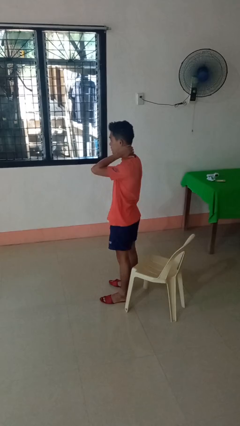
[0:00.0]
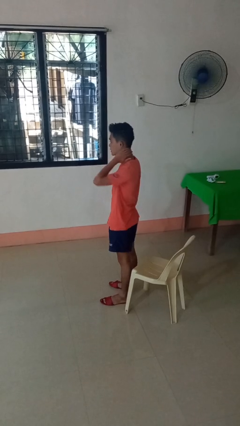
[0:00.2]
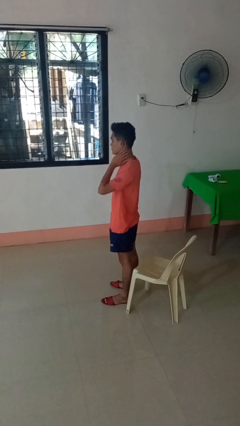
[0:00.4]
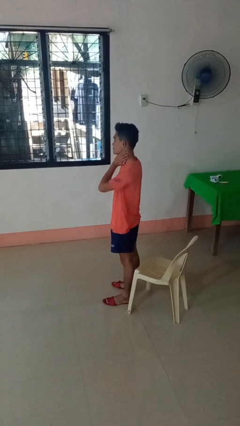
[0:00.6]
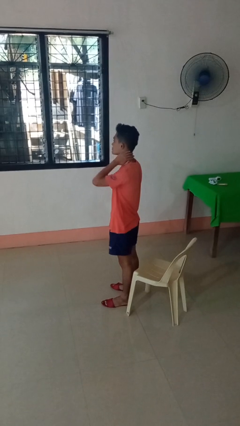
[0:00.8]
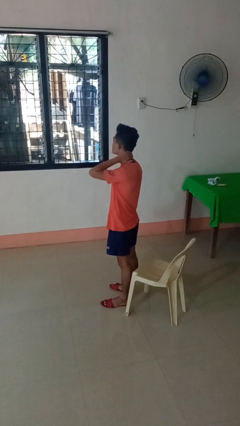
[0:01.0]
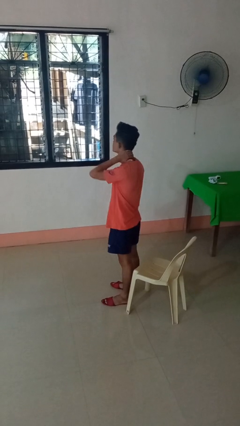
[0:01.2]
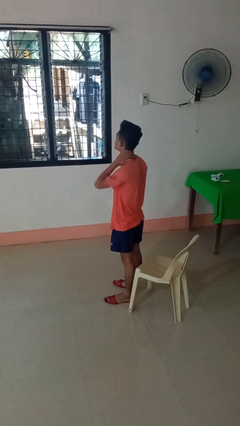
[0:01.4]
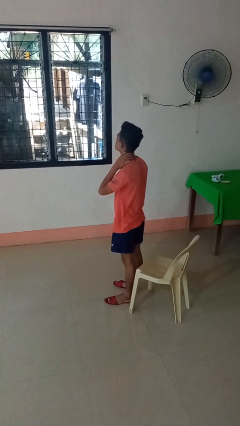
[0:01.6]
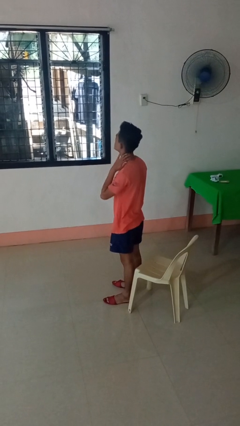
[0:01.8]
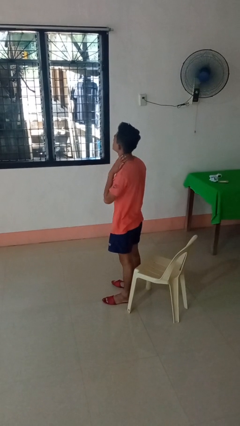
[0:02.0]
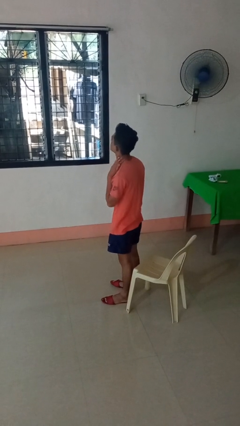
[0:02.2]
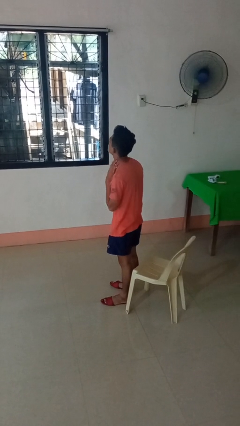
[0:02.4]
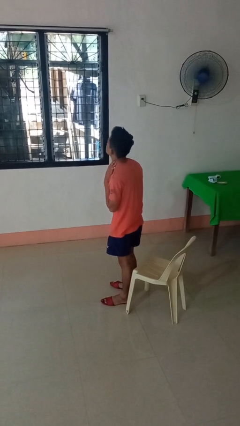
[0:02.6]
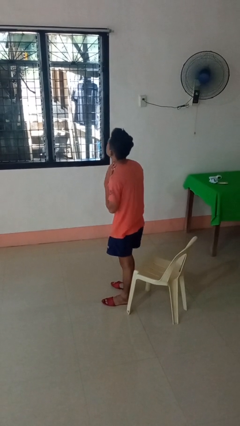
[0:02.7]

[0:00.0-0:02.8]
person rubs neck

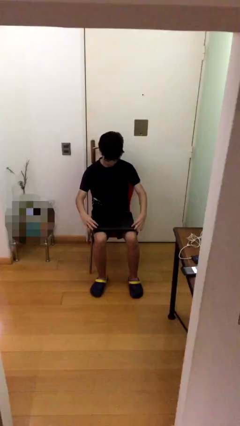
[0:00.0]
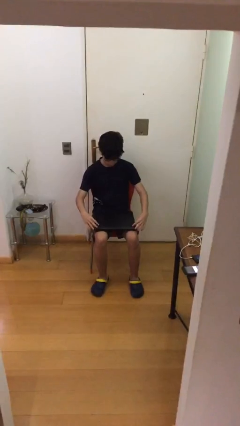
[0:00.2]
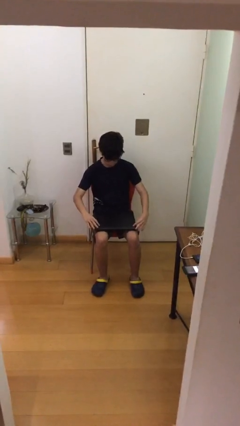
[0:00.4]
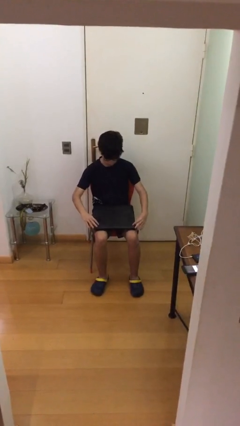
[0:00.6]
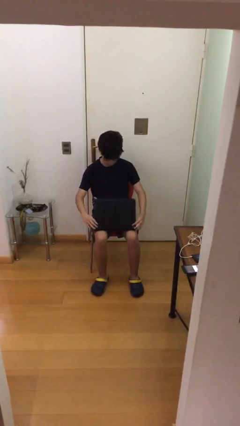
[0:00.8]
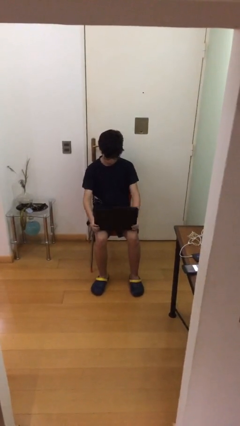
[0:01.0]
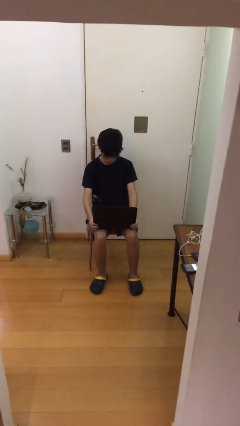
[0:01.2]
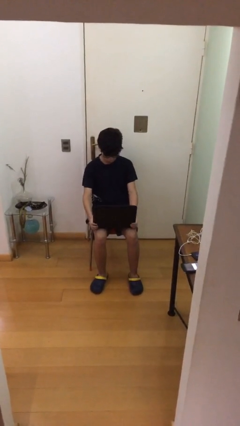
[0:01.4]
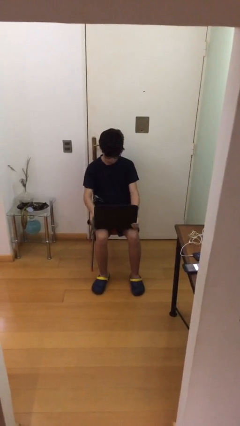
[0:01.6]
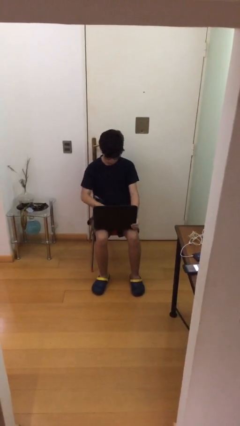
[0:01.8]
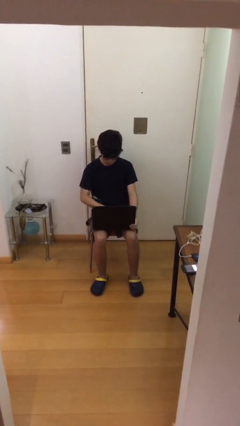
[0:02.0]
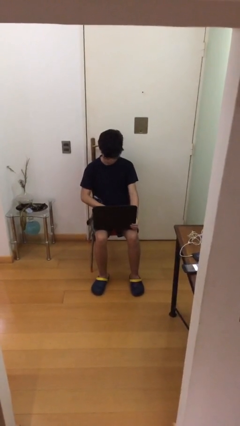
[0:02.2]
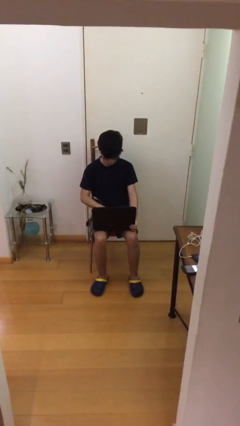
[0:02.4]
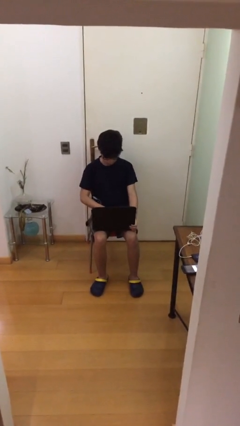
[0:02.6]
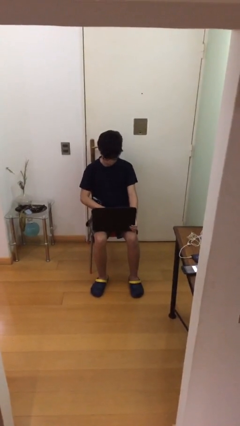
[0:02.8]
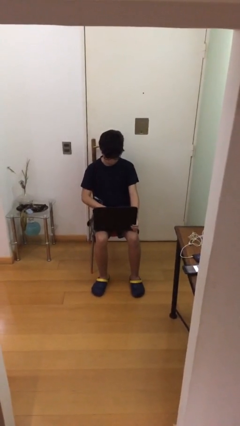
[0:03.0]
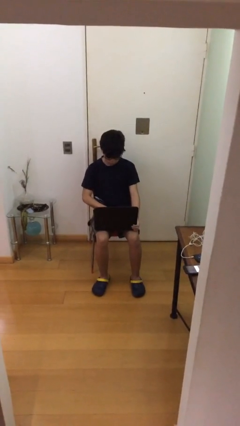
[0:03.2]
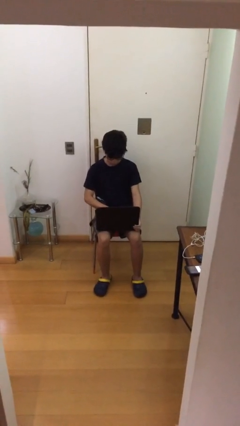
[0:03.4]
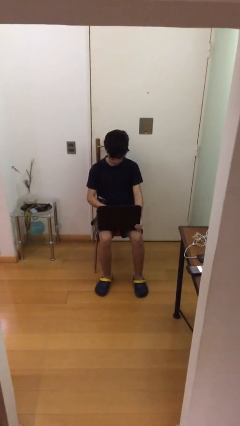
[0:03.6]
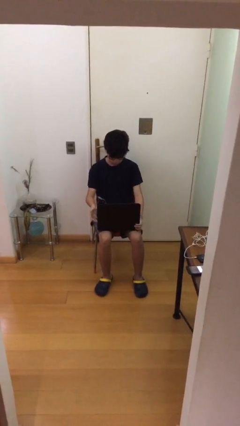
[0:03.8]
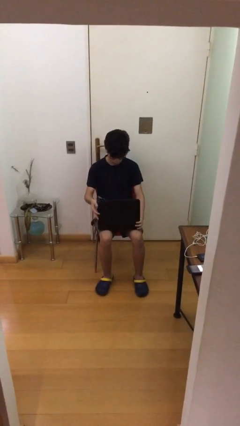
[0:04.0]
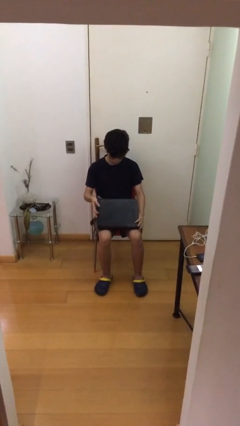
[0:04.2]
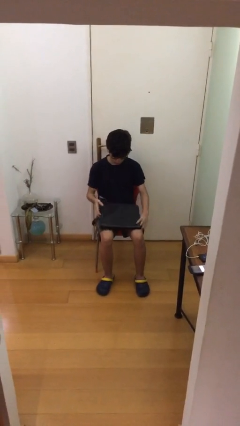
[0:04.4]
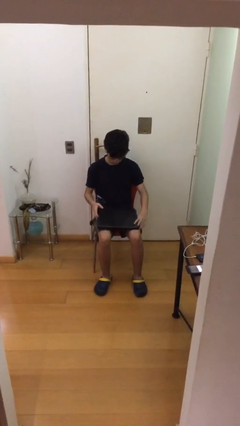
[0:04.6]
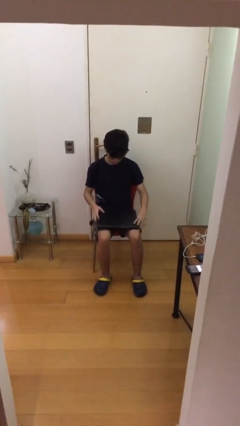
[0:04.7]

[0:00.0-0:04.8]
person interacts with laptop

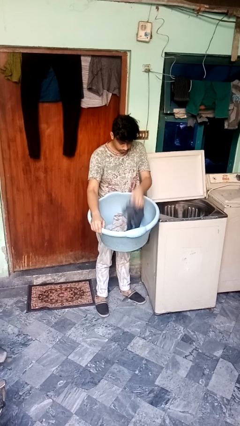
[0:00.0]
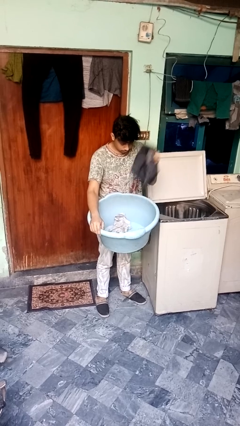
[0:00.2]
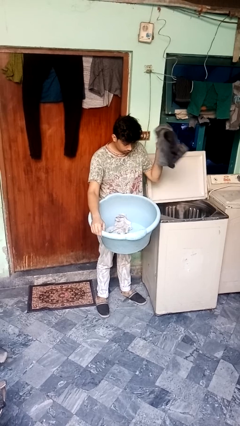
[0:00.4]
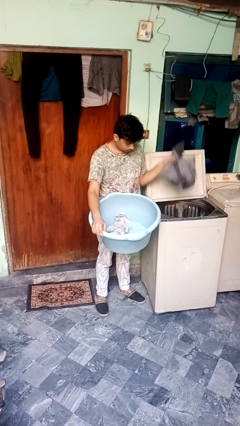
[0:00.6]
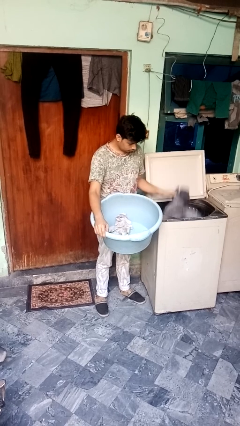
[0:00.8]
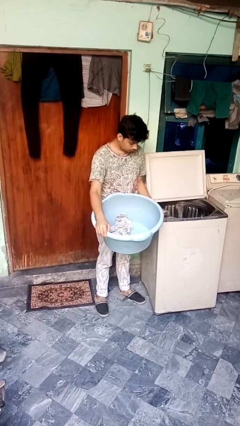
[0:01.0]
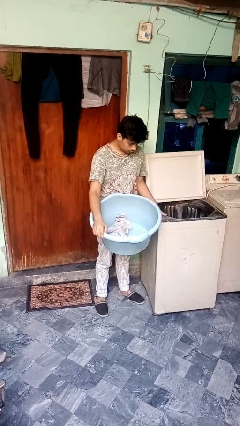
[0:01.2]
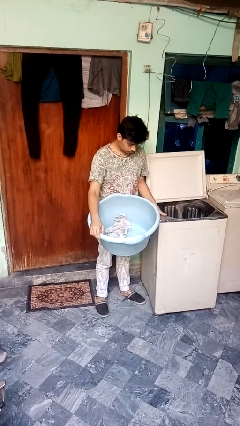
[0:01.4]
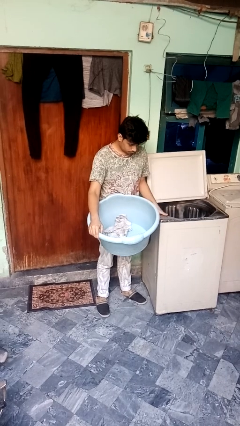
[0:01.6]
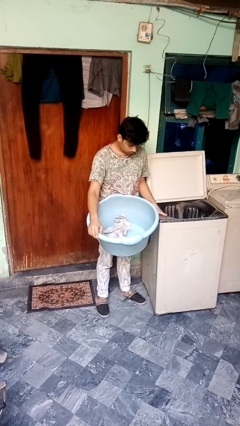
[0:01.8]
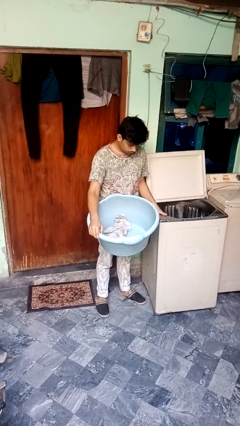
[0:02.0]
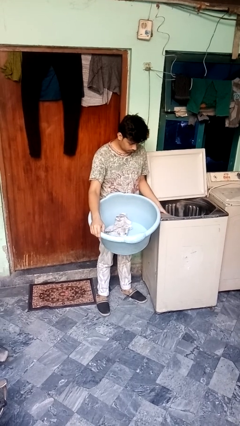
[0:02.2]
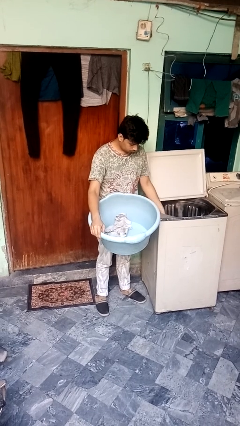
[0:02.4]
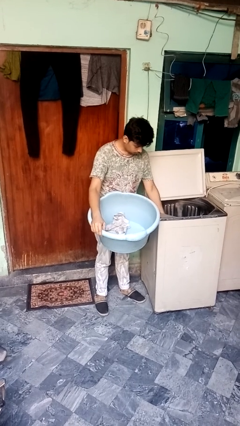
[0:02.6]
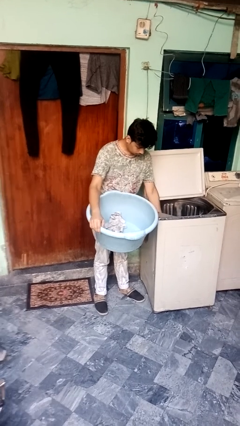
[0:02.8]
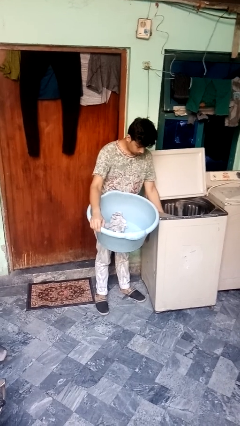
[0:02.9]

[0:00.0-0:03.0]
person unloads clotheswasher

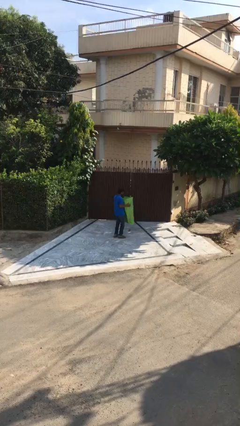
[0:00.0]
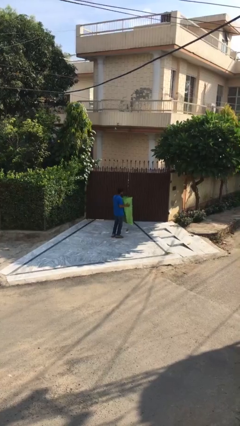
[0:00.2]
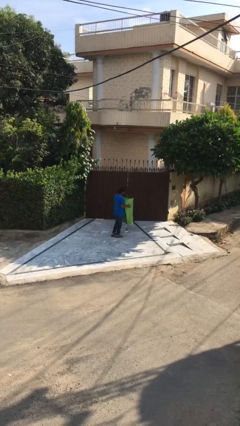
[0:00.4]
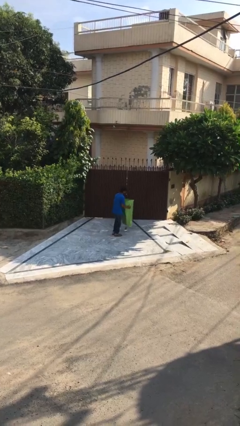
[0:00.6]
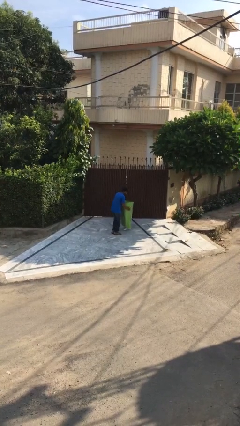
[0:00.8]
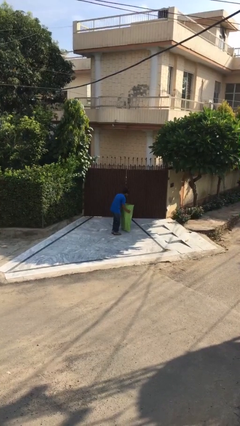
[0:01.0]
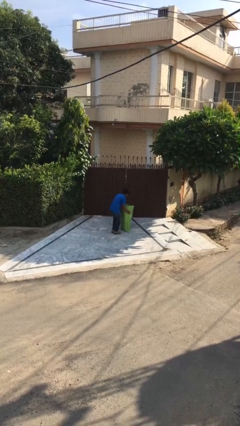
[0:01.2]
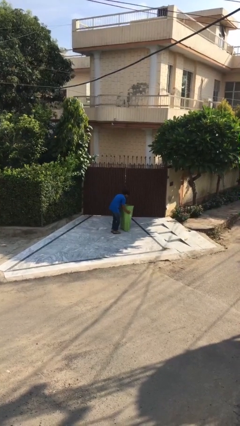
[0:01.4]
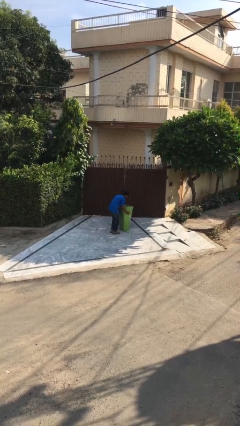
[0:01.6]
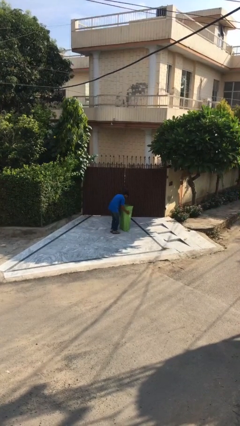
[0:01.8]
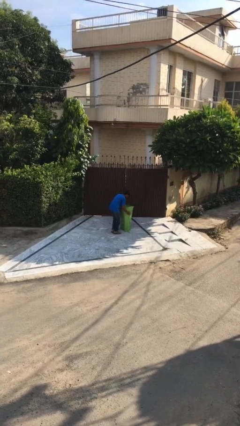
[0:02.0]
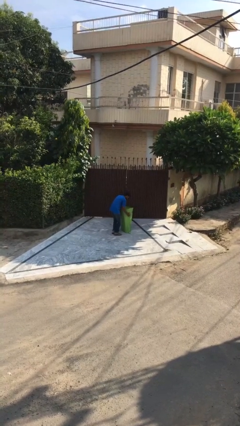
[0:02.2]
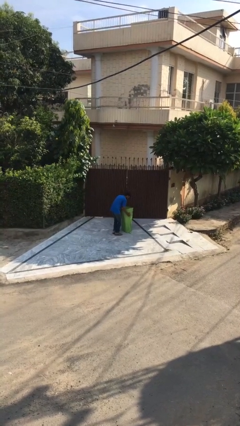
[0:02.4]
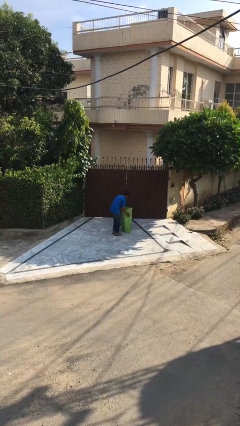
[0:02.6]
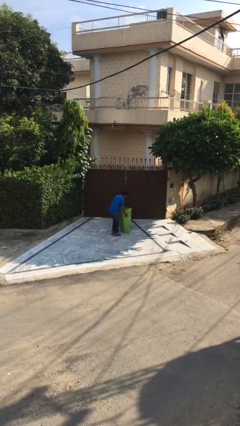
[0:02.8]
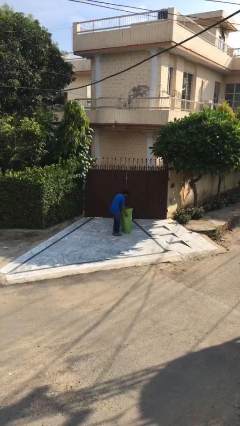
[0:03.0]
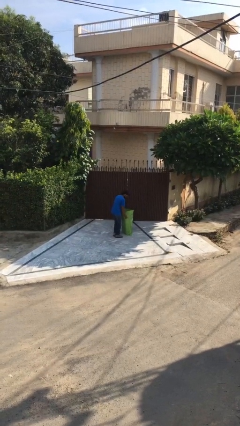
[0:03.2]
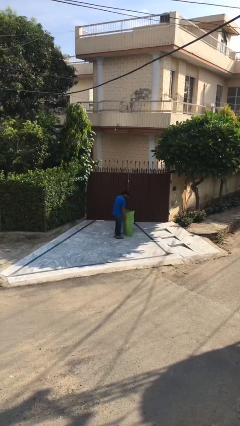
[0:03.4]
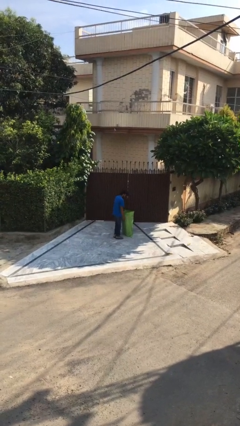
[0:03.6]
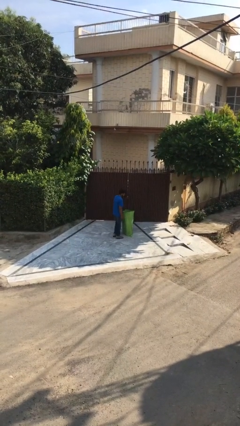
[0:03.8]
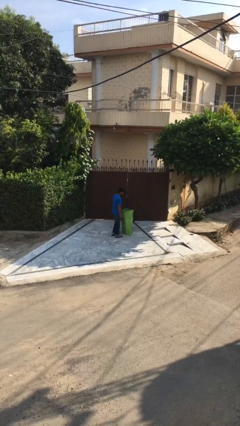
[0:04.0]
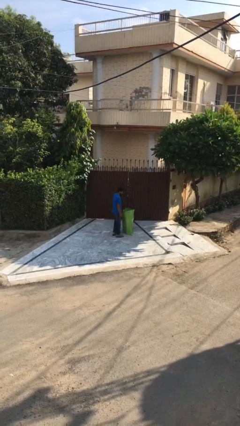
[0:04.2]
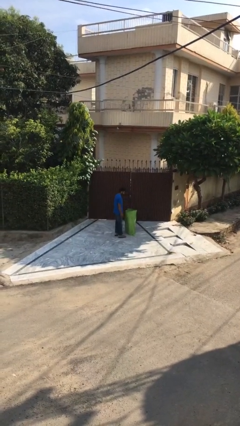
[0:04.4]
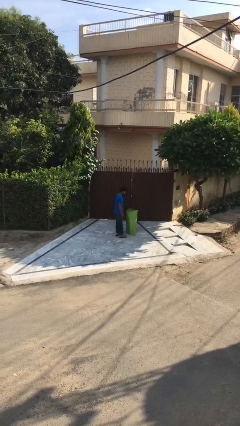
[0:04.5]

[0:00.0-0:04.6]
person puts down object on floor

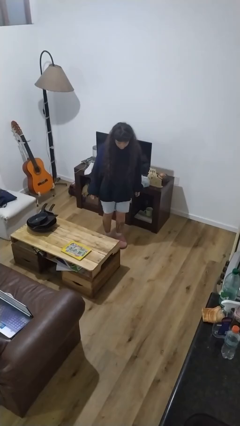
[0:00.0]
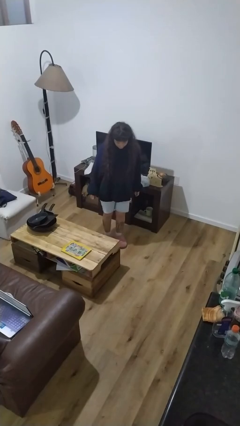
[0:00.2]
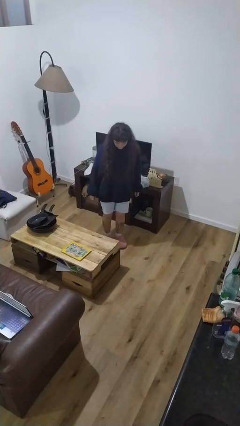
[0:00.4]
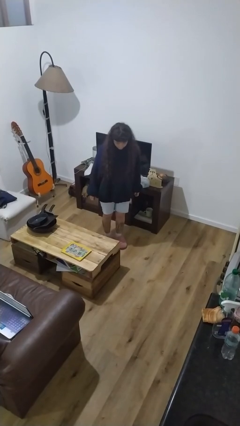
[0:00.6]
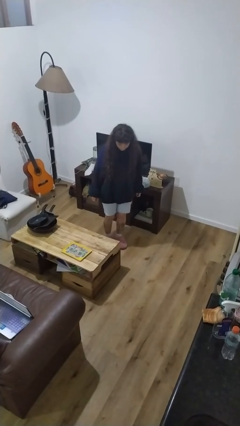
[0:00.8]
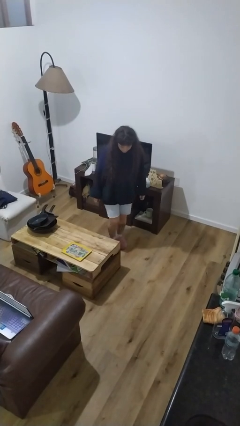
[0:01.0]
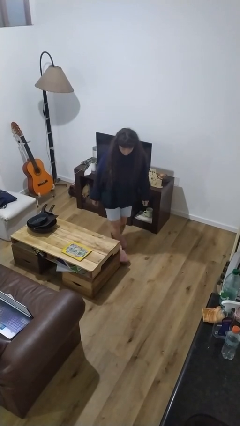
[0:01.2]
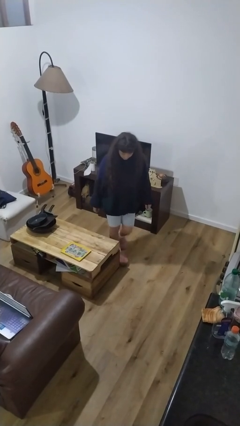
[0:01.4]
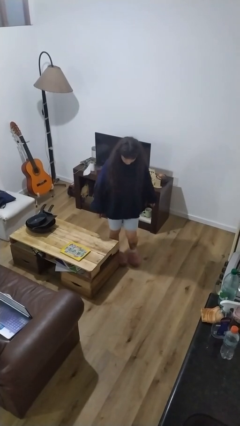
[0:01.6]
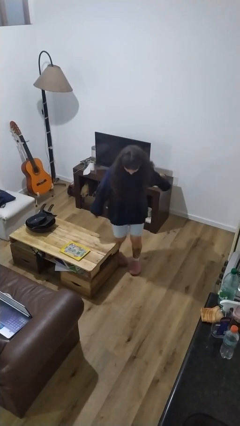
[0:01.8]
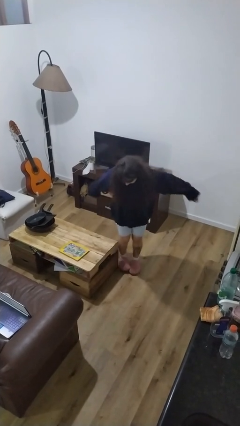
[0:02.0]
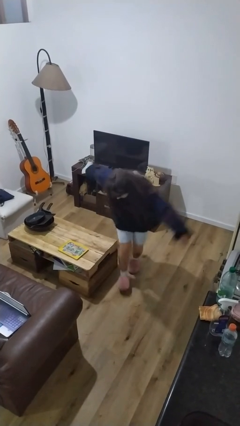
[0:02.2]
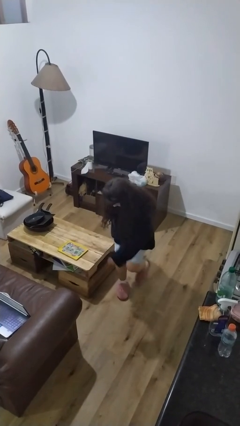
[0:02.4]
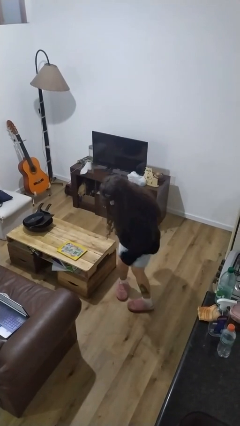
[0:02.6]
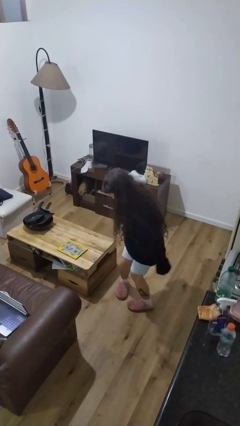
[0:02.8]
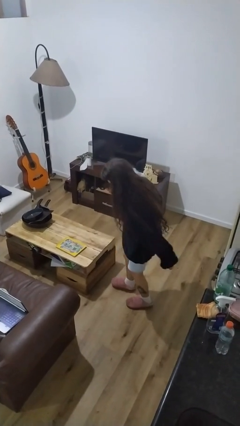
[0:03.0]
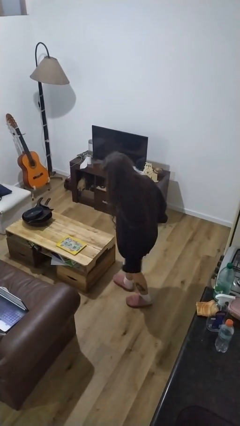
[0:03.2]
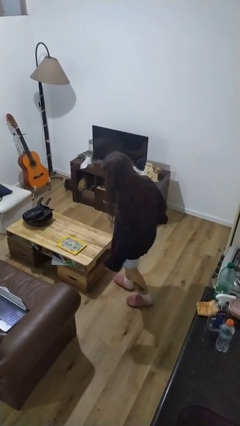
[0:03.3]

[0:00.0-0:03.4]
person bumps into table
